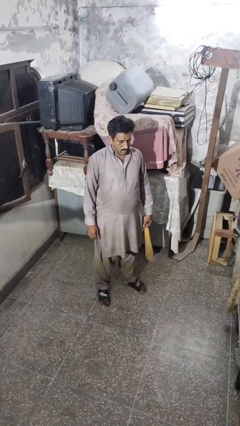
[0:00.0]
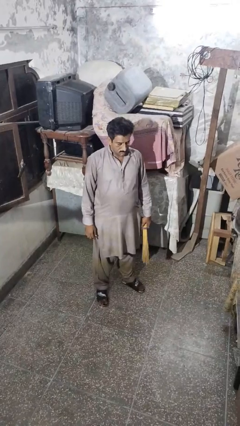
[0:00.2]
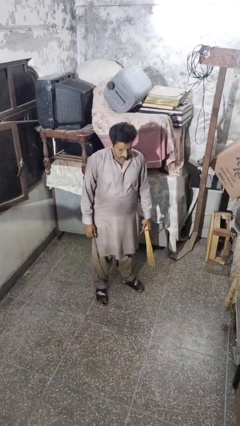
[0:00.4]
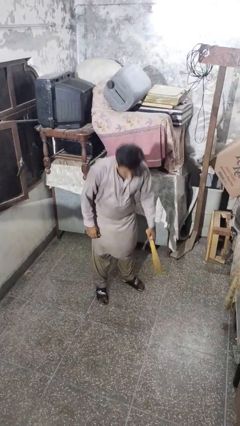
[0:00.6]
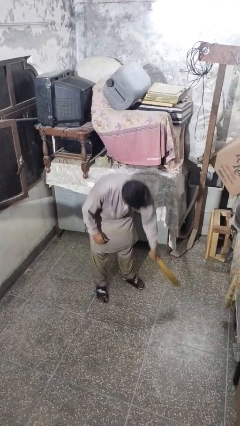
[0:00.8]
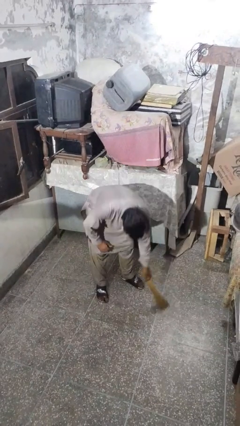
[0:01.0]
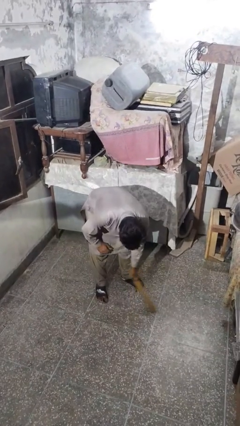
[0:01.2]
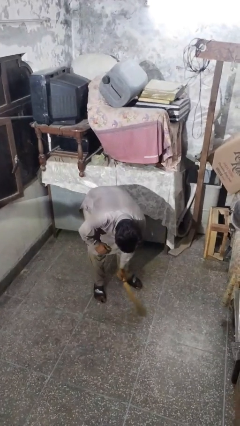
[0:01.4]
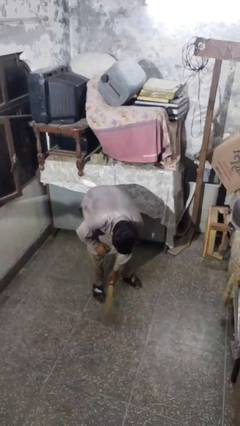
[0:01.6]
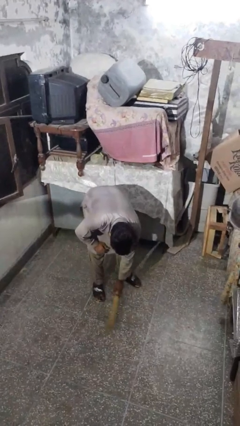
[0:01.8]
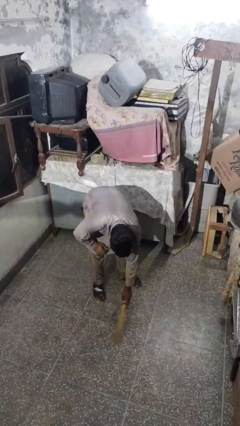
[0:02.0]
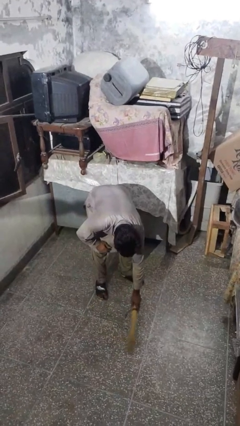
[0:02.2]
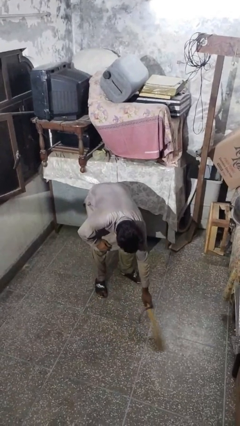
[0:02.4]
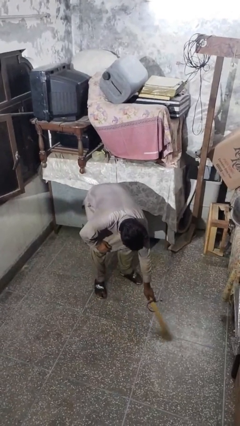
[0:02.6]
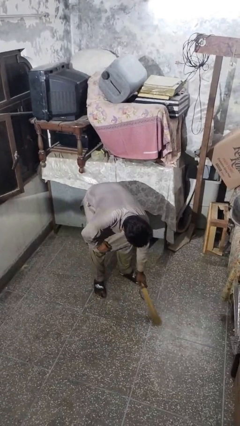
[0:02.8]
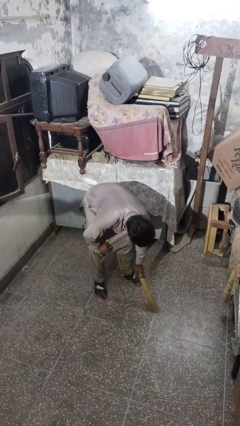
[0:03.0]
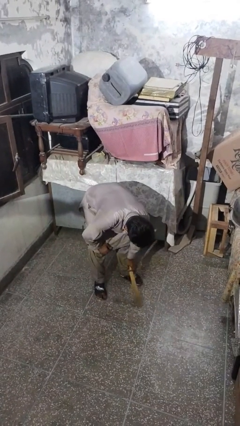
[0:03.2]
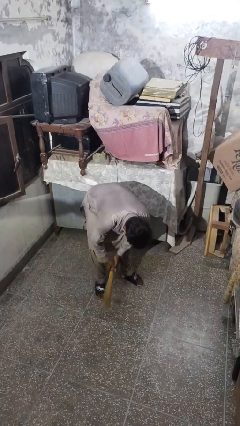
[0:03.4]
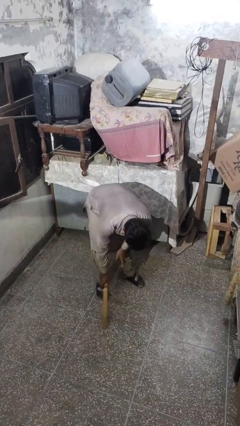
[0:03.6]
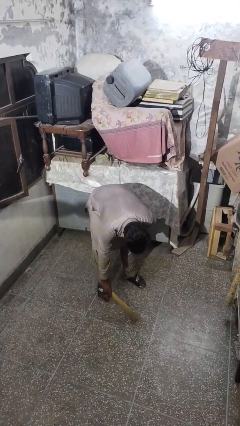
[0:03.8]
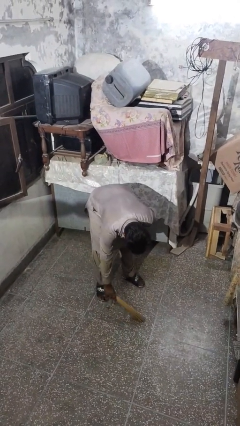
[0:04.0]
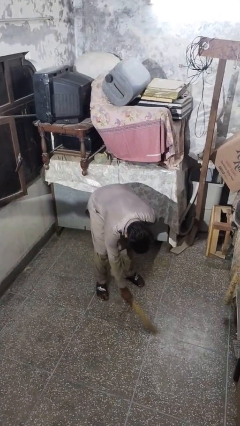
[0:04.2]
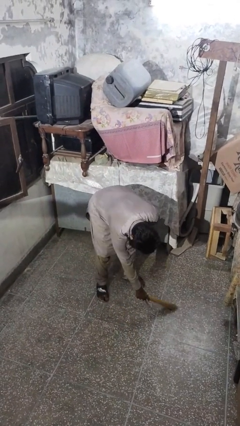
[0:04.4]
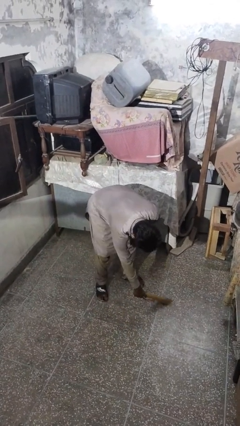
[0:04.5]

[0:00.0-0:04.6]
person sweeps floor

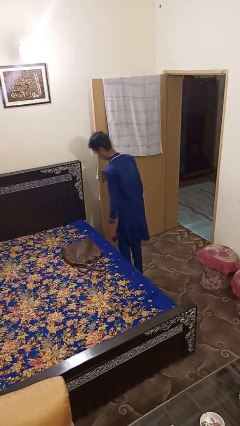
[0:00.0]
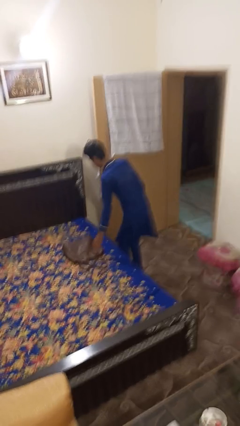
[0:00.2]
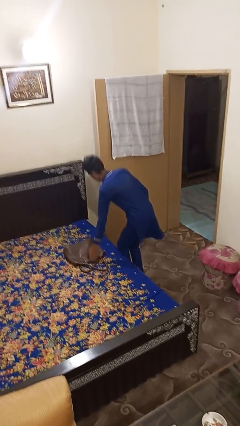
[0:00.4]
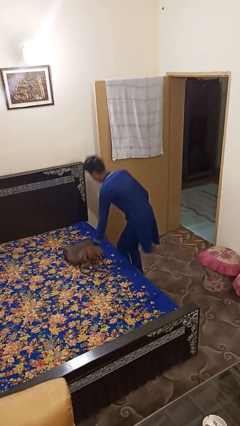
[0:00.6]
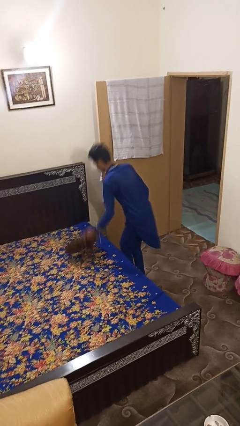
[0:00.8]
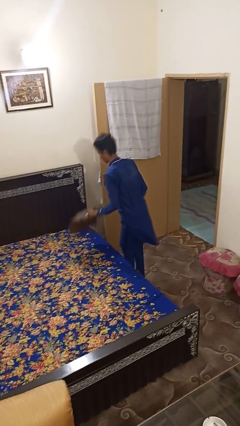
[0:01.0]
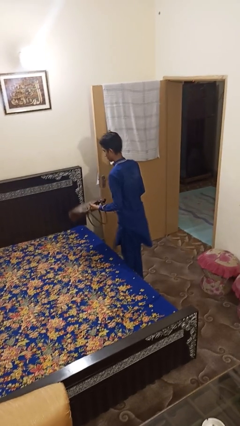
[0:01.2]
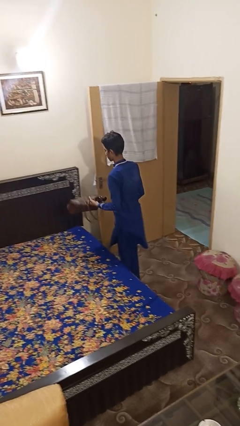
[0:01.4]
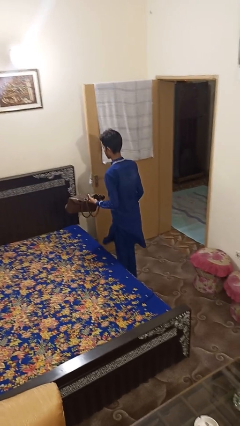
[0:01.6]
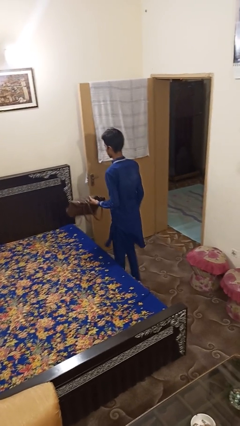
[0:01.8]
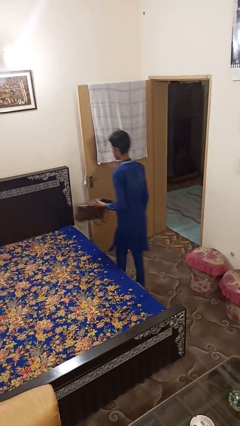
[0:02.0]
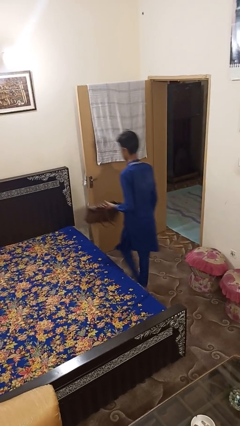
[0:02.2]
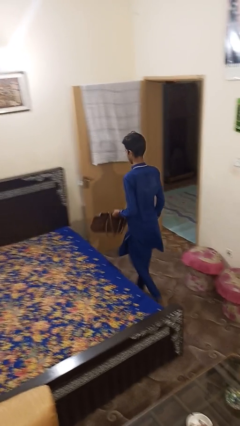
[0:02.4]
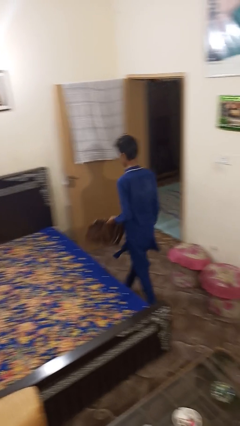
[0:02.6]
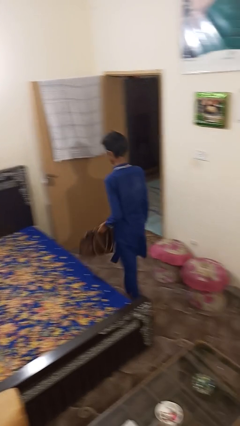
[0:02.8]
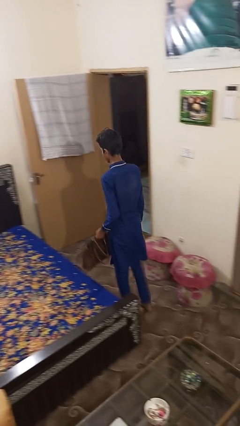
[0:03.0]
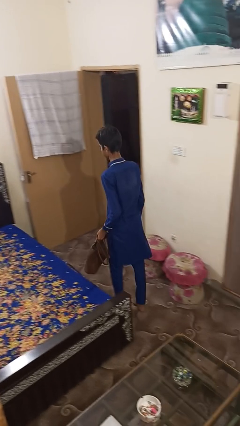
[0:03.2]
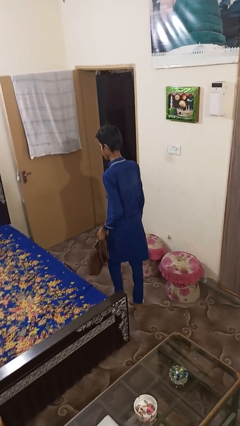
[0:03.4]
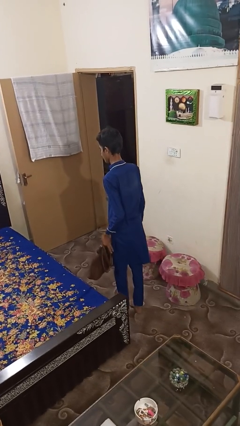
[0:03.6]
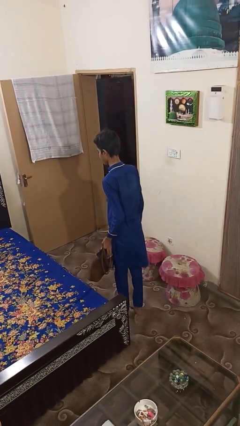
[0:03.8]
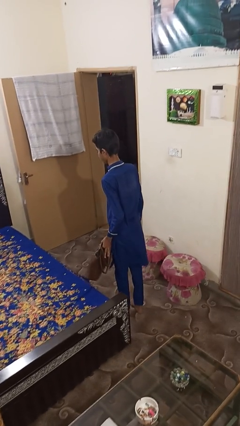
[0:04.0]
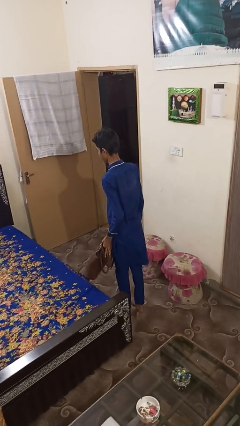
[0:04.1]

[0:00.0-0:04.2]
person picks up object from bed

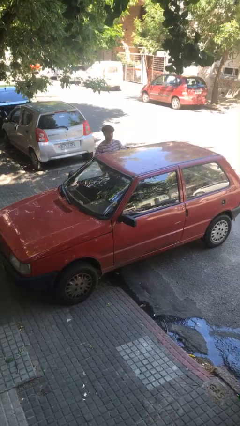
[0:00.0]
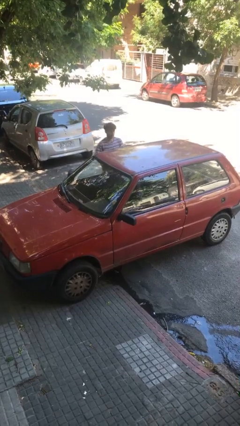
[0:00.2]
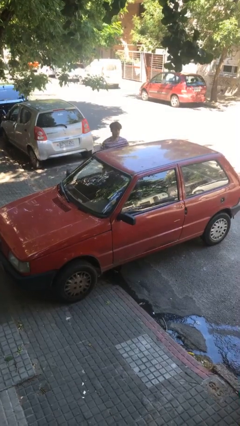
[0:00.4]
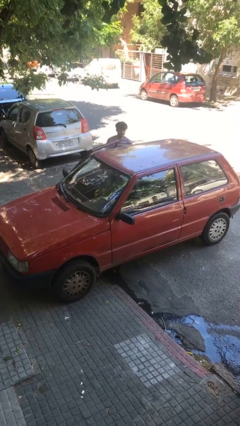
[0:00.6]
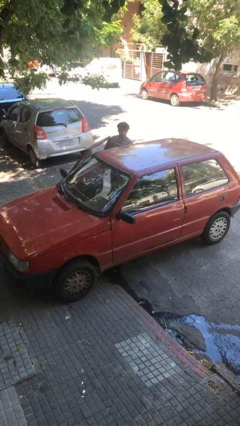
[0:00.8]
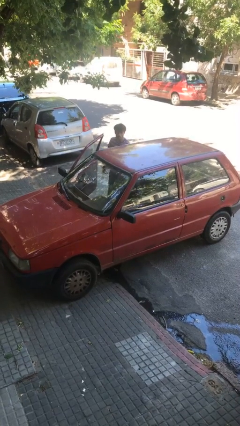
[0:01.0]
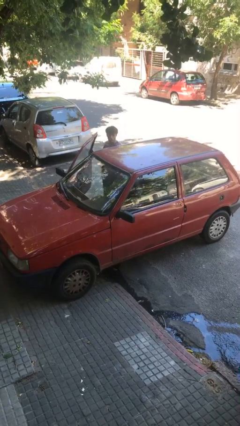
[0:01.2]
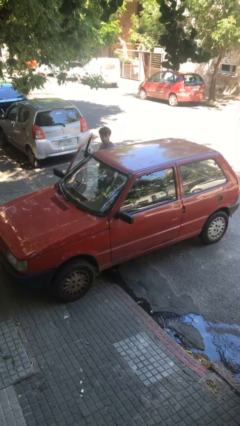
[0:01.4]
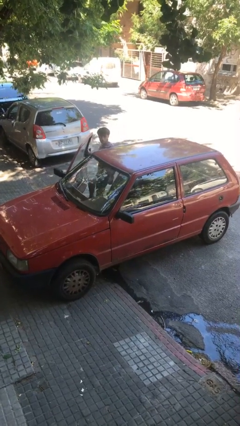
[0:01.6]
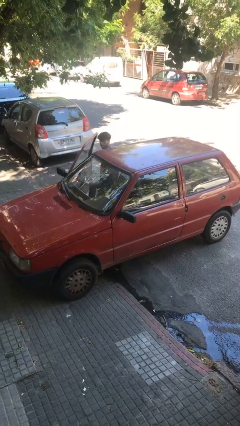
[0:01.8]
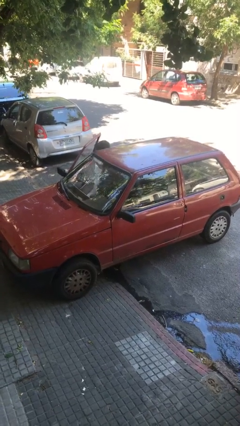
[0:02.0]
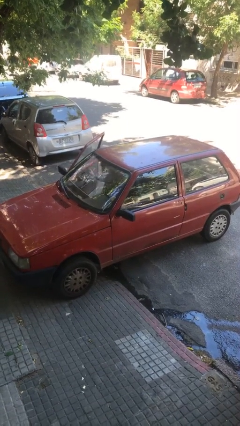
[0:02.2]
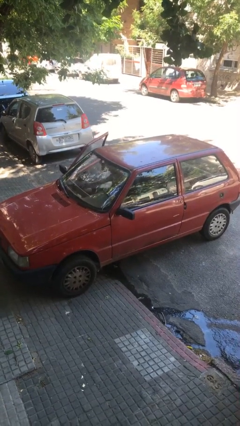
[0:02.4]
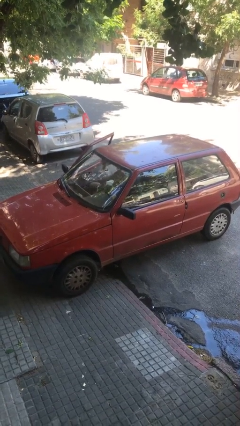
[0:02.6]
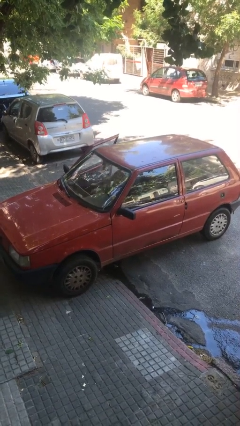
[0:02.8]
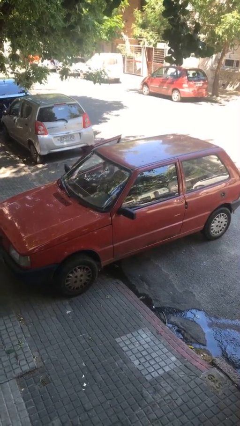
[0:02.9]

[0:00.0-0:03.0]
car picks up person

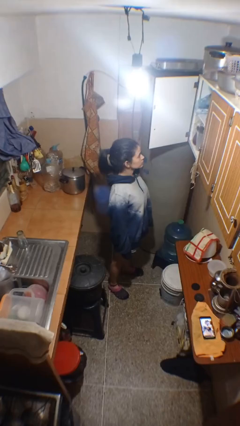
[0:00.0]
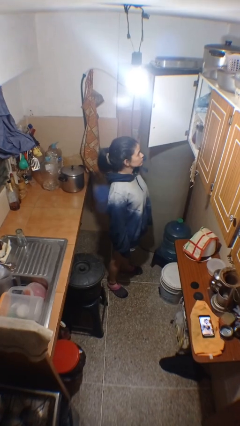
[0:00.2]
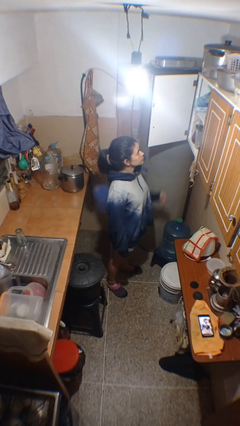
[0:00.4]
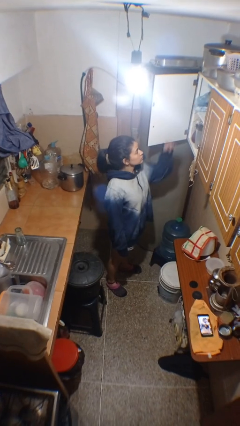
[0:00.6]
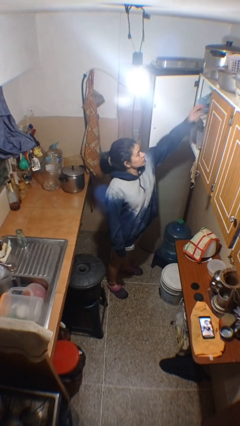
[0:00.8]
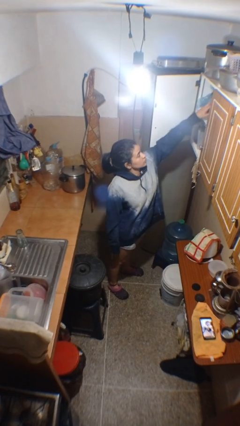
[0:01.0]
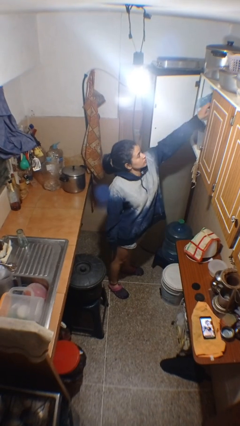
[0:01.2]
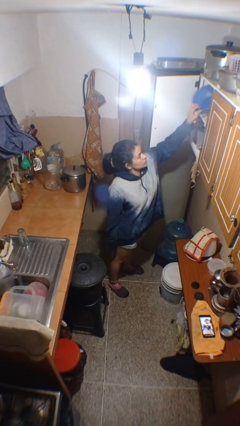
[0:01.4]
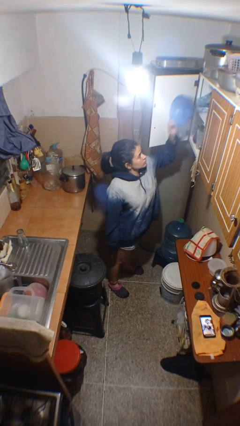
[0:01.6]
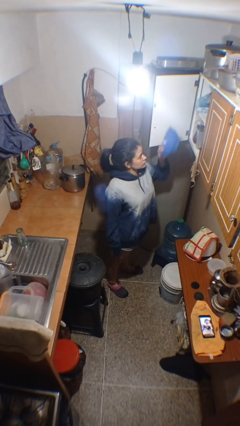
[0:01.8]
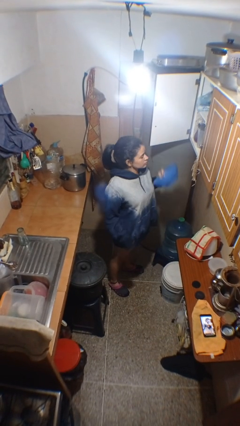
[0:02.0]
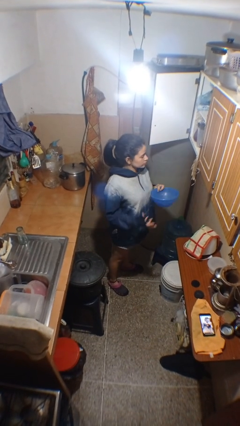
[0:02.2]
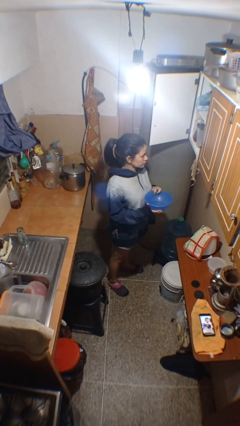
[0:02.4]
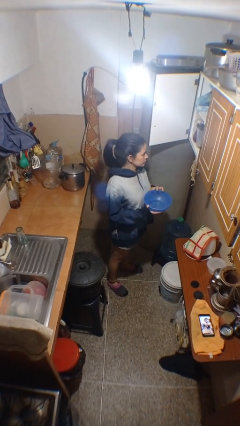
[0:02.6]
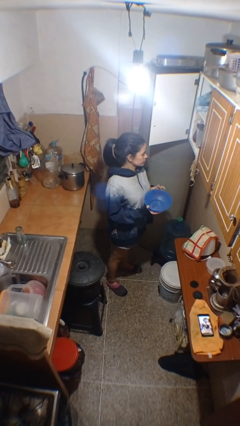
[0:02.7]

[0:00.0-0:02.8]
person picks up object from cabinet

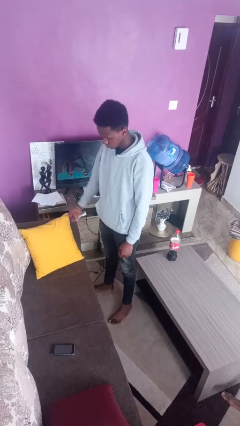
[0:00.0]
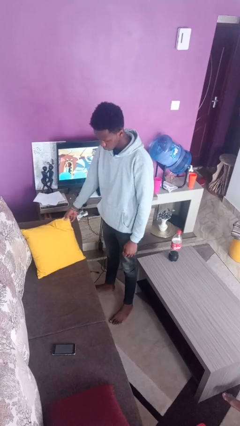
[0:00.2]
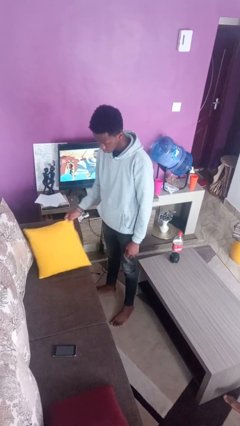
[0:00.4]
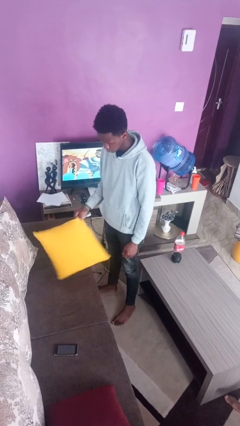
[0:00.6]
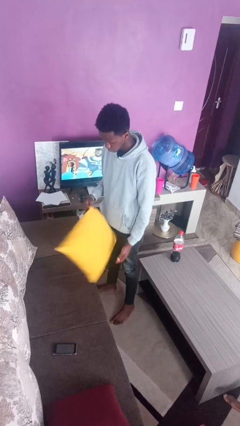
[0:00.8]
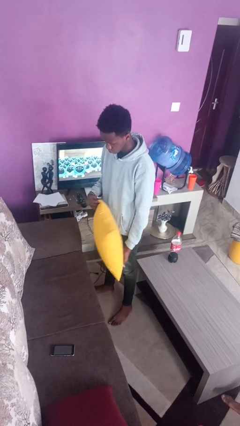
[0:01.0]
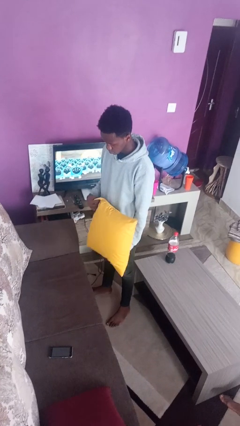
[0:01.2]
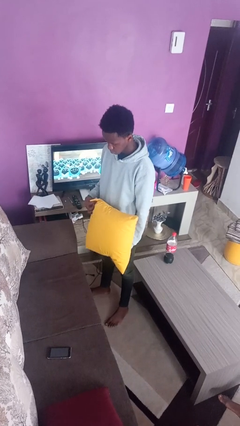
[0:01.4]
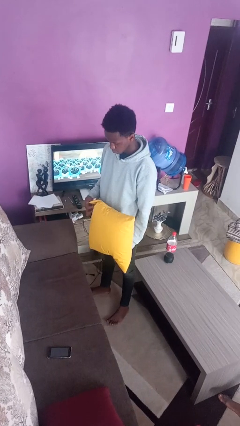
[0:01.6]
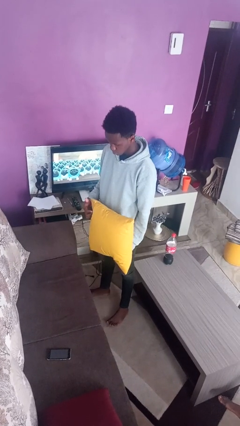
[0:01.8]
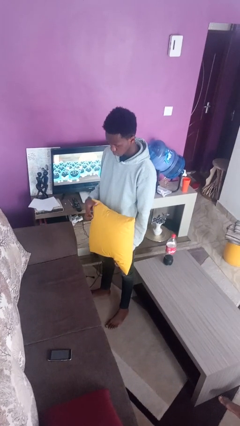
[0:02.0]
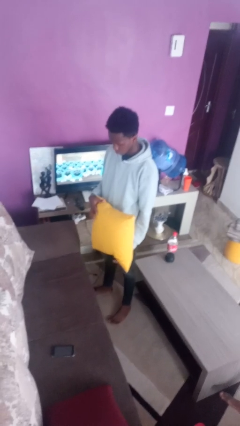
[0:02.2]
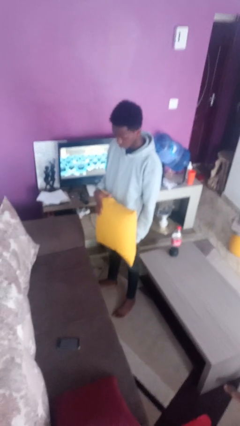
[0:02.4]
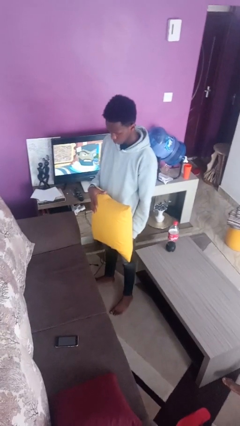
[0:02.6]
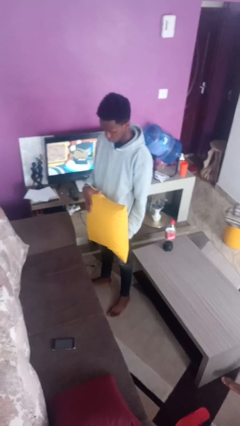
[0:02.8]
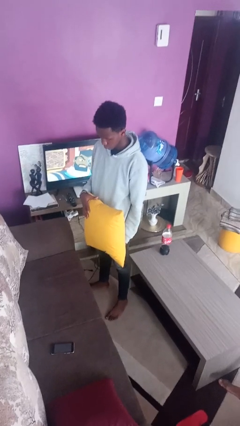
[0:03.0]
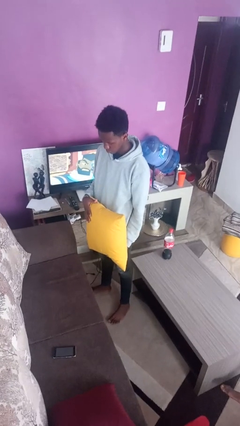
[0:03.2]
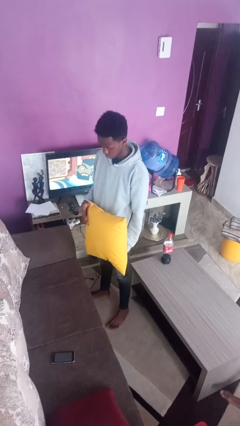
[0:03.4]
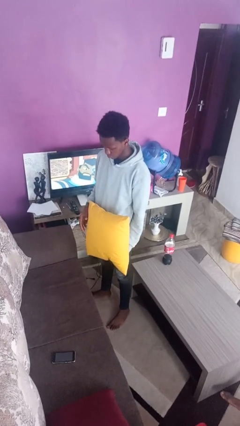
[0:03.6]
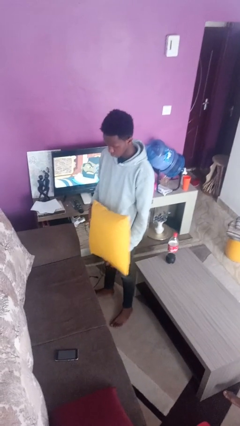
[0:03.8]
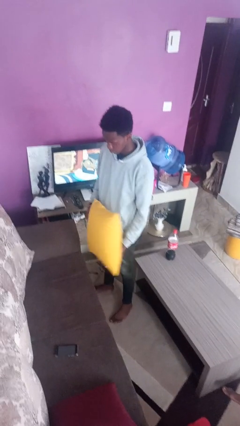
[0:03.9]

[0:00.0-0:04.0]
person picks up object from couch
